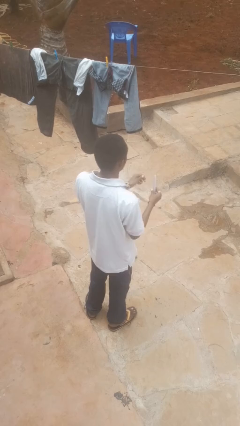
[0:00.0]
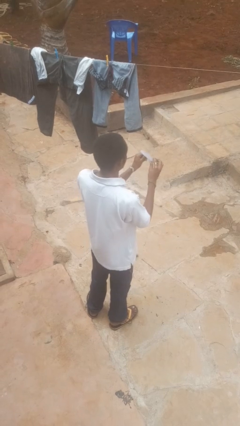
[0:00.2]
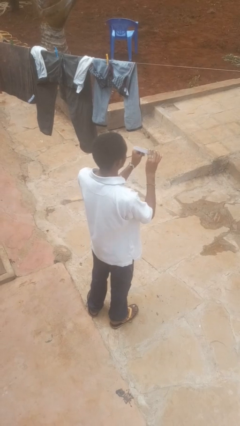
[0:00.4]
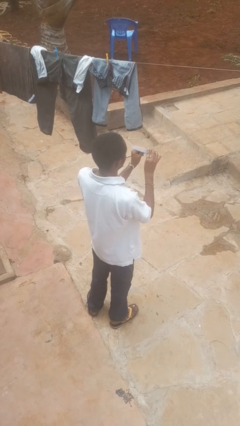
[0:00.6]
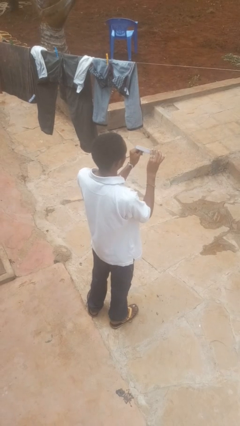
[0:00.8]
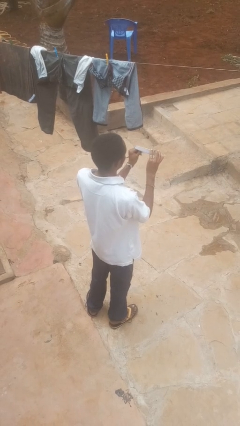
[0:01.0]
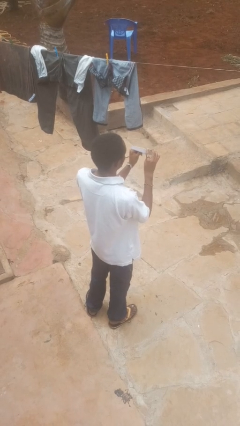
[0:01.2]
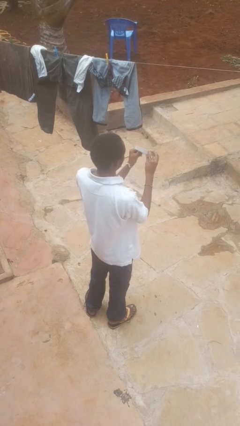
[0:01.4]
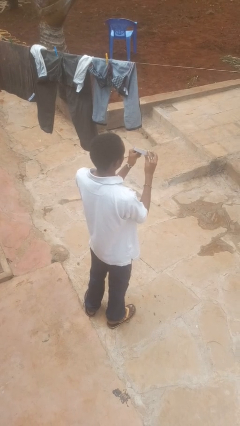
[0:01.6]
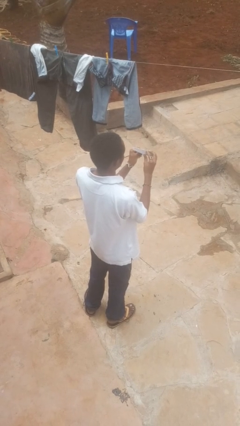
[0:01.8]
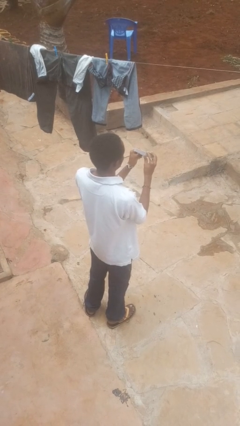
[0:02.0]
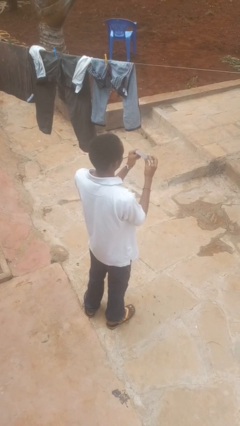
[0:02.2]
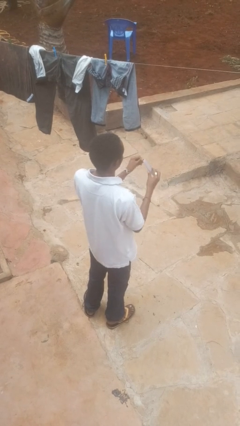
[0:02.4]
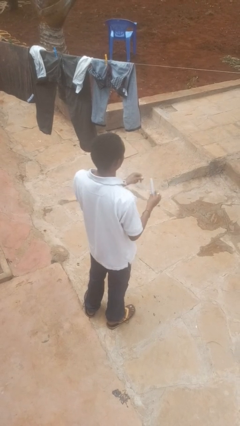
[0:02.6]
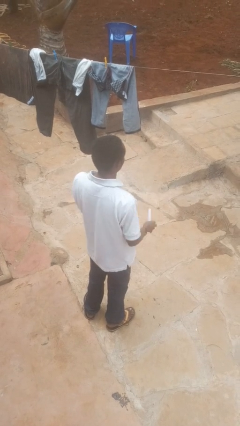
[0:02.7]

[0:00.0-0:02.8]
person files fingernails

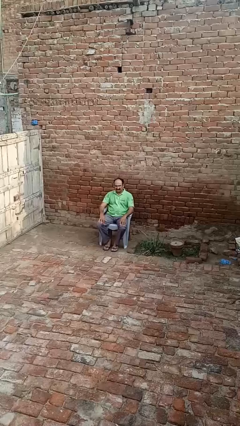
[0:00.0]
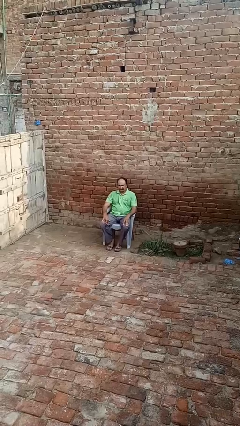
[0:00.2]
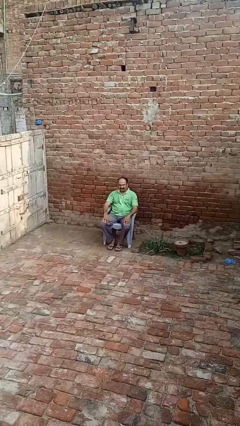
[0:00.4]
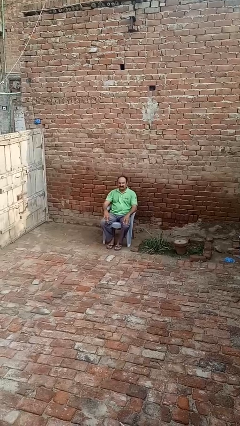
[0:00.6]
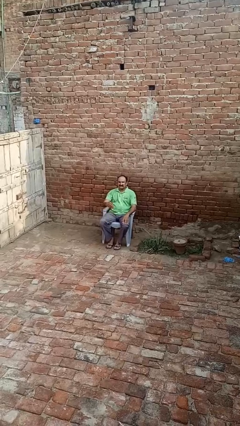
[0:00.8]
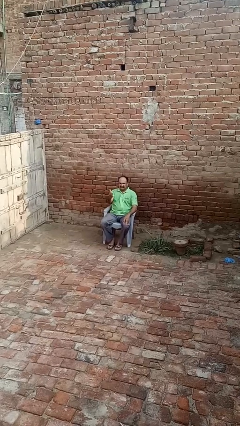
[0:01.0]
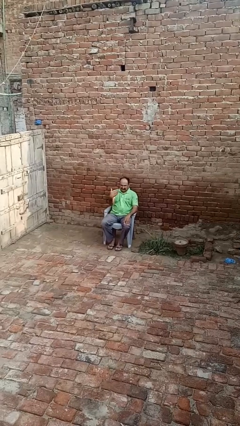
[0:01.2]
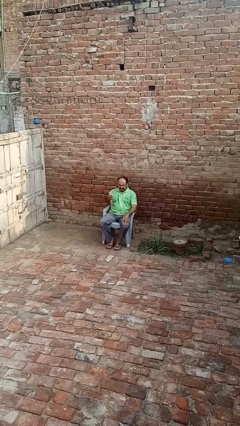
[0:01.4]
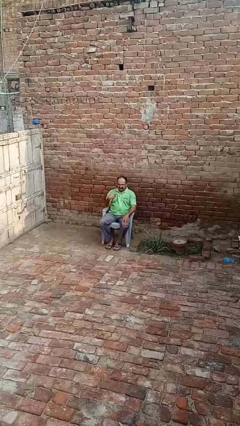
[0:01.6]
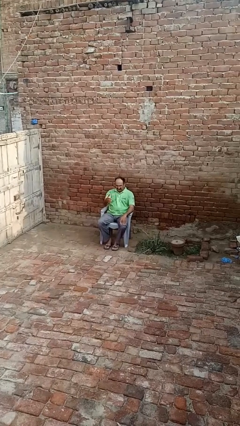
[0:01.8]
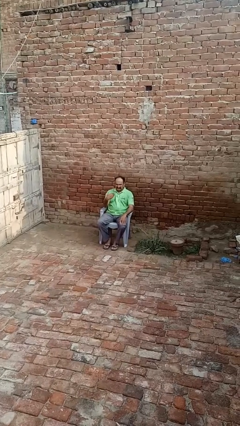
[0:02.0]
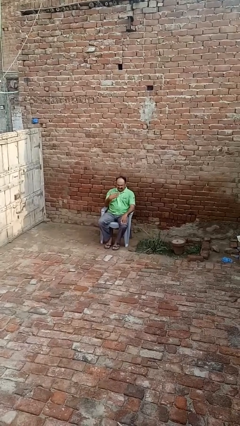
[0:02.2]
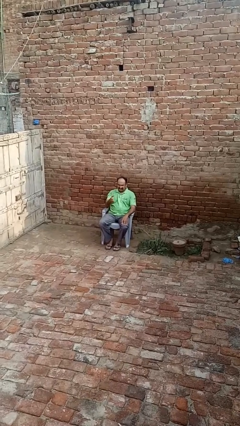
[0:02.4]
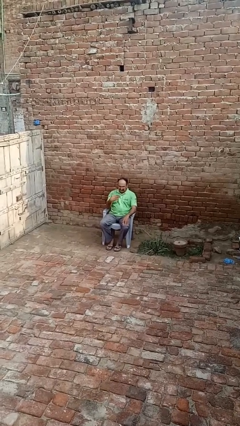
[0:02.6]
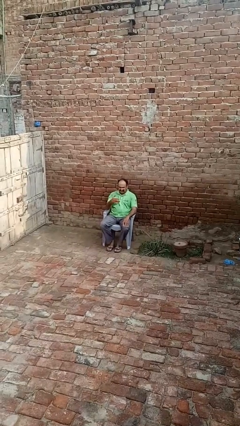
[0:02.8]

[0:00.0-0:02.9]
person gestures come here

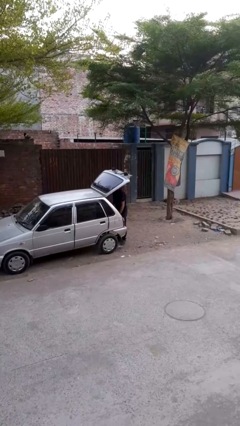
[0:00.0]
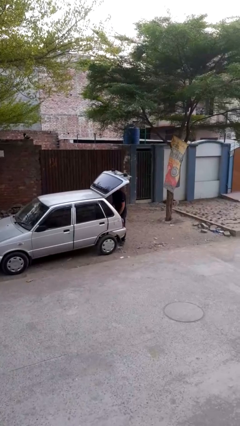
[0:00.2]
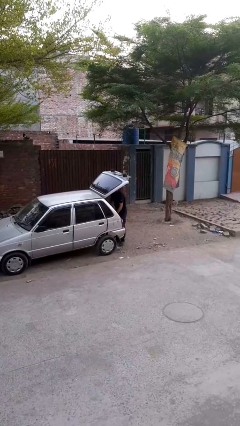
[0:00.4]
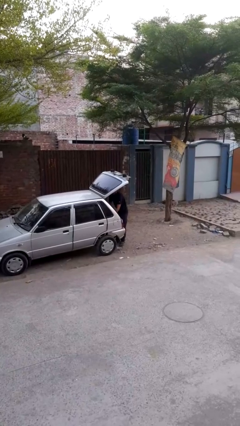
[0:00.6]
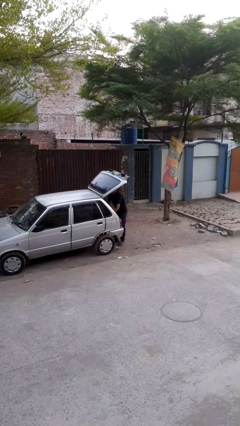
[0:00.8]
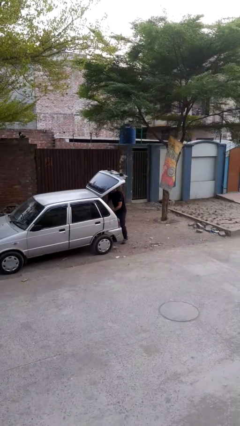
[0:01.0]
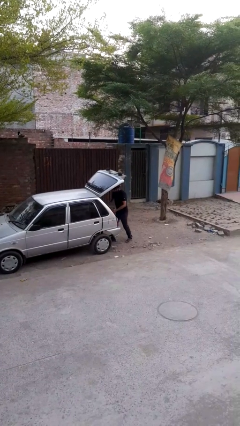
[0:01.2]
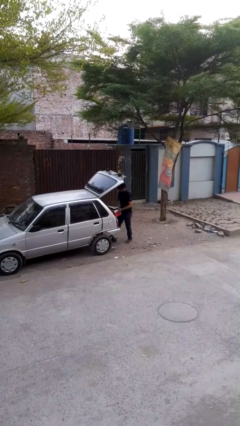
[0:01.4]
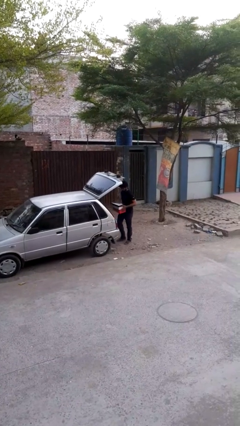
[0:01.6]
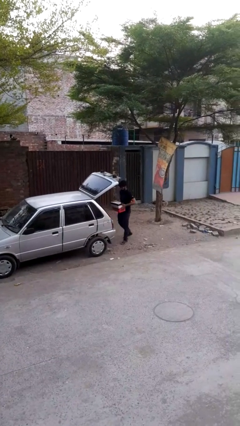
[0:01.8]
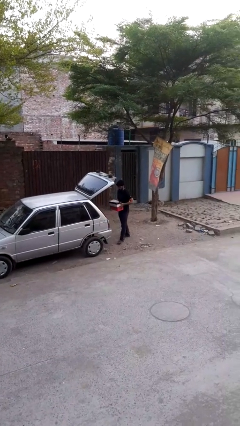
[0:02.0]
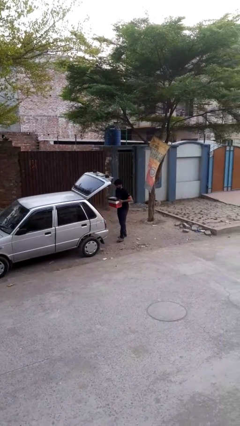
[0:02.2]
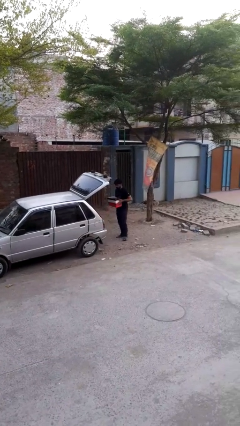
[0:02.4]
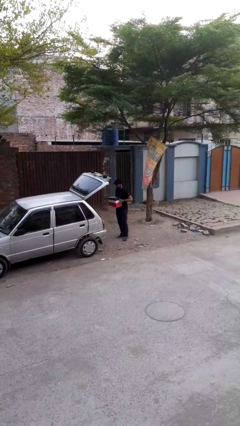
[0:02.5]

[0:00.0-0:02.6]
person unloads car

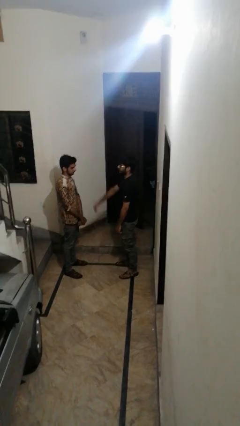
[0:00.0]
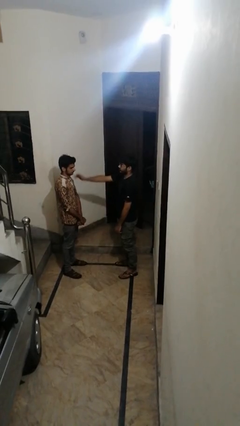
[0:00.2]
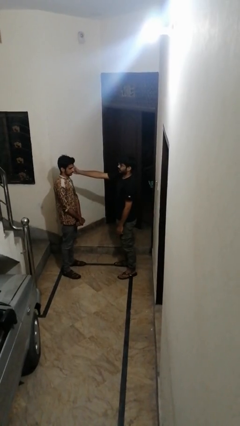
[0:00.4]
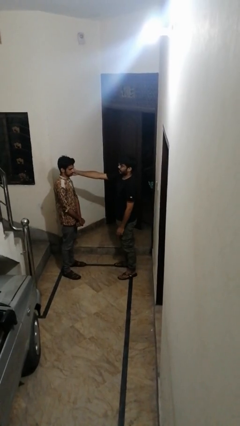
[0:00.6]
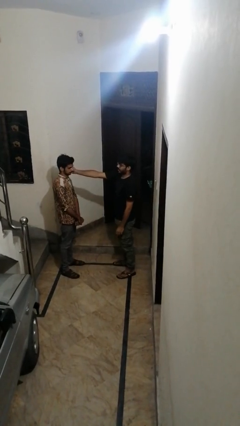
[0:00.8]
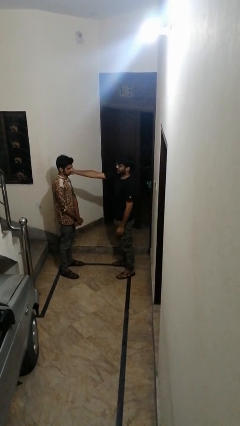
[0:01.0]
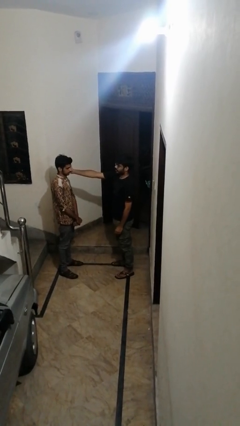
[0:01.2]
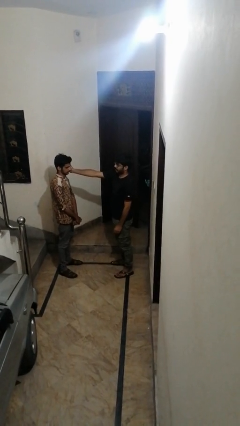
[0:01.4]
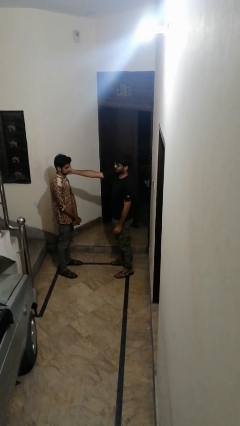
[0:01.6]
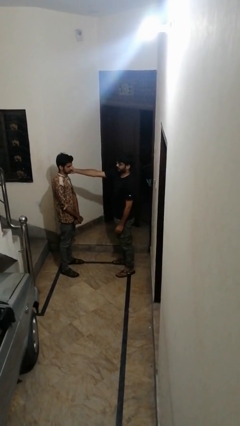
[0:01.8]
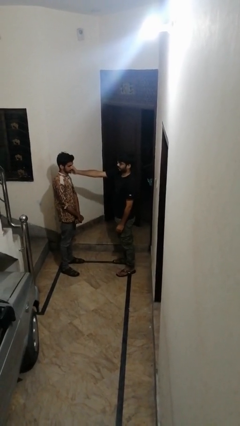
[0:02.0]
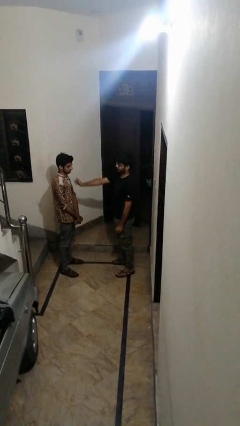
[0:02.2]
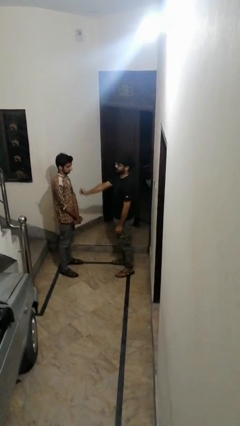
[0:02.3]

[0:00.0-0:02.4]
person touches face of person

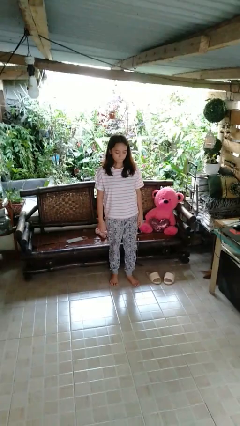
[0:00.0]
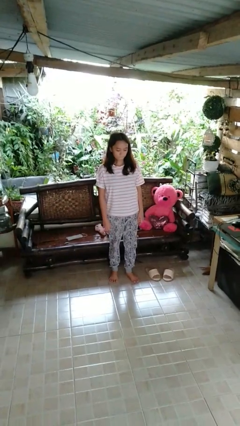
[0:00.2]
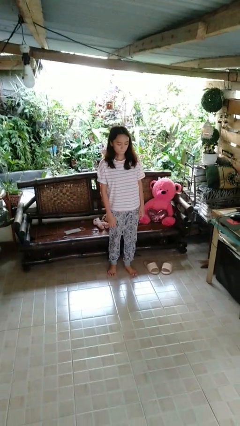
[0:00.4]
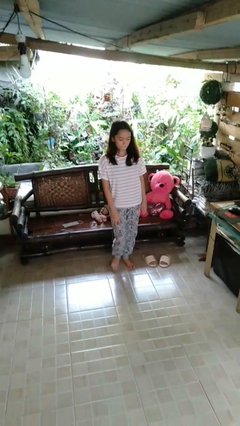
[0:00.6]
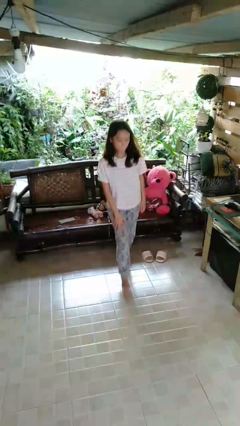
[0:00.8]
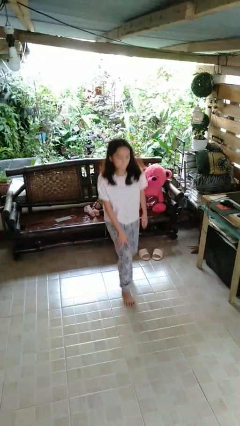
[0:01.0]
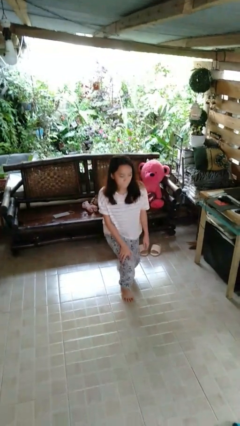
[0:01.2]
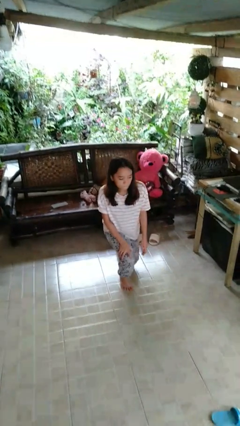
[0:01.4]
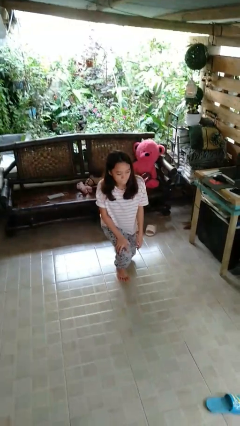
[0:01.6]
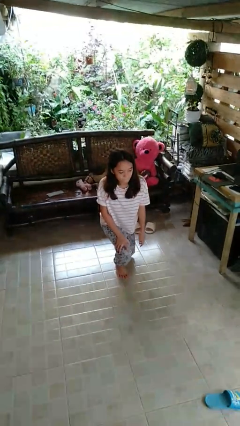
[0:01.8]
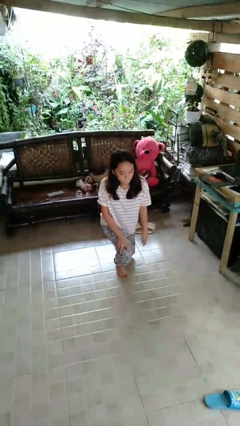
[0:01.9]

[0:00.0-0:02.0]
person kneels

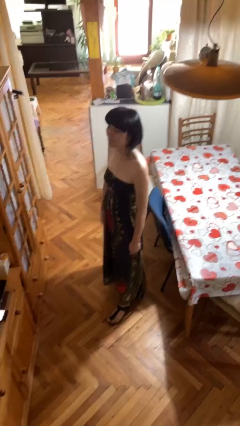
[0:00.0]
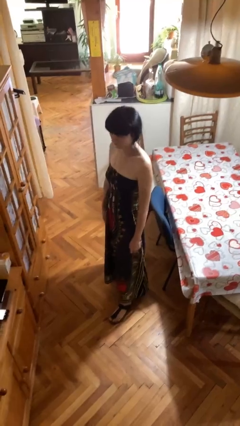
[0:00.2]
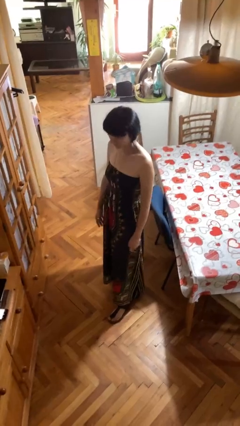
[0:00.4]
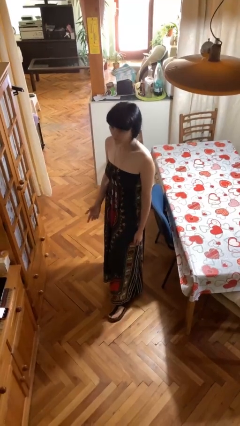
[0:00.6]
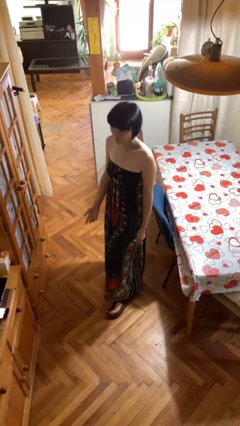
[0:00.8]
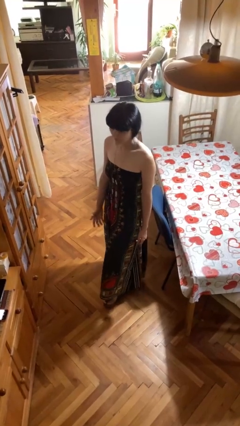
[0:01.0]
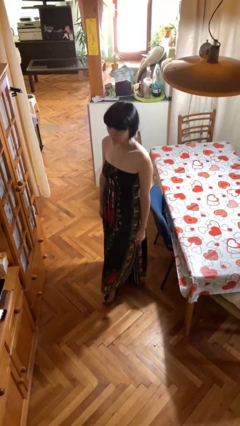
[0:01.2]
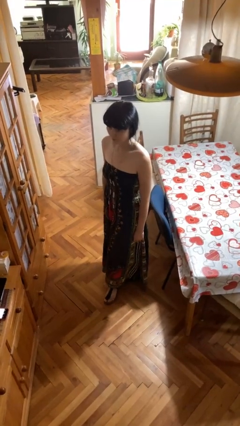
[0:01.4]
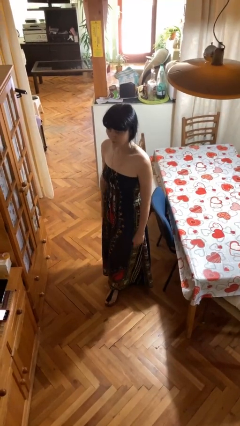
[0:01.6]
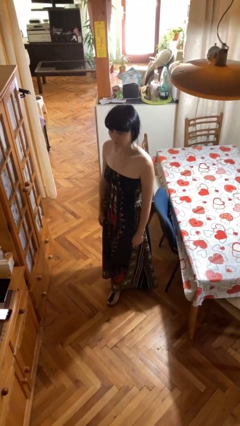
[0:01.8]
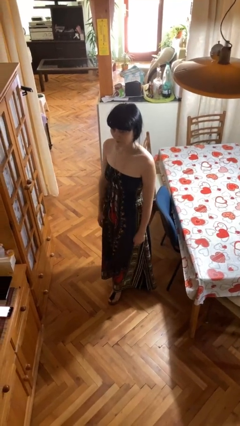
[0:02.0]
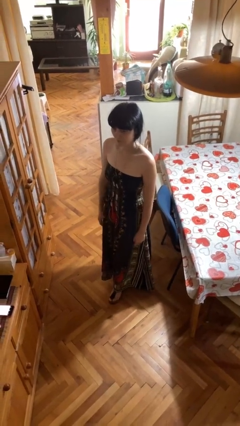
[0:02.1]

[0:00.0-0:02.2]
person nods head

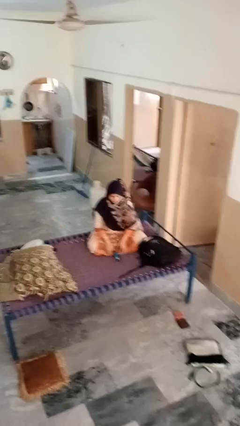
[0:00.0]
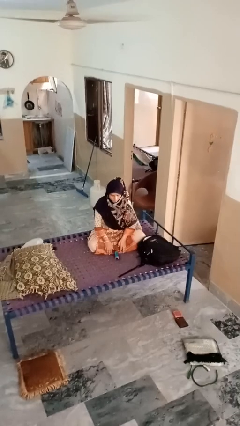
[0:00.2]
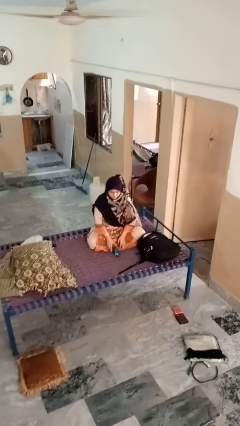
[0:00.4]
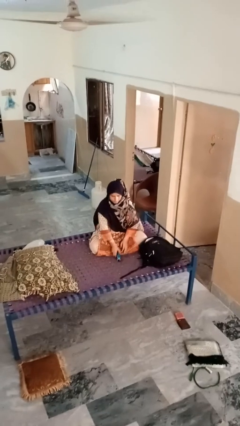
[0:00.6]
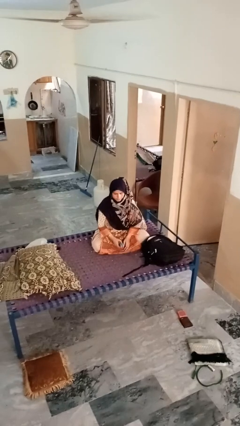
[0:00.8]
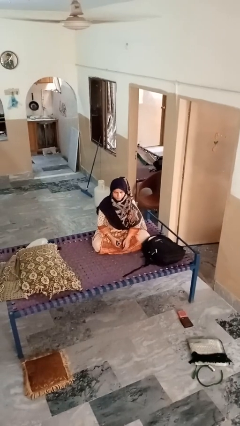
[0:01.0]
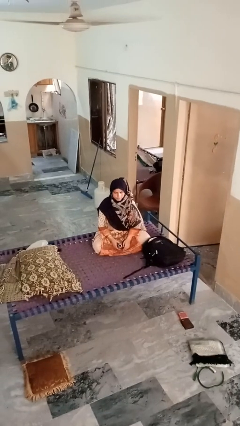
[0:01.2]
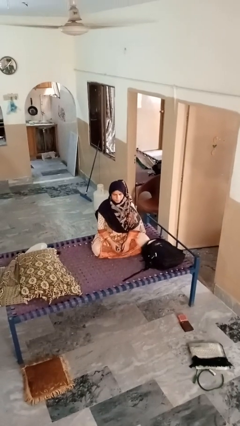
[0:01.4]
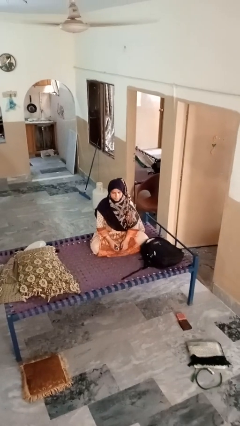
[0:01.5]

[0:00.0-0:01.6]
person picks up object from floor

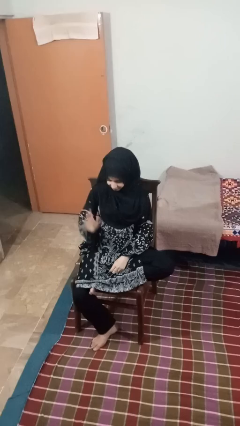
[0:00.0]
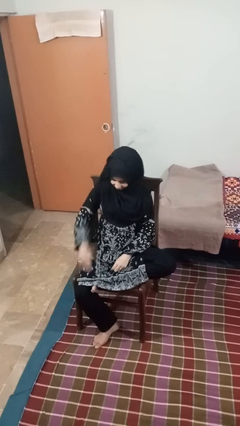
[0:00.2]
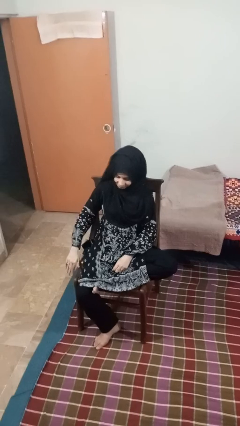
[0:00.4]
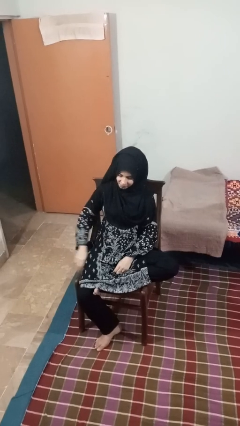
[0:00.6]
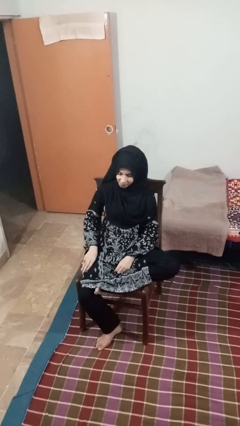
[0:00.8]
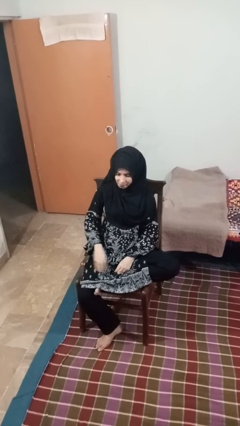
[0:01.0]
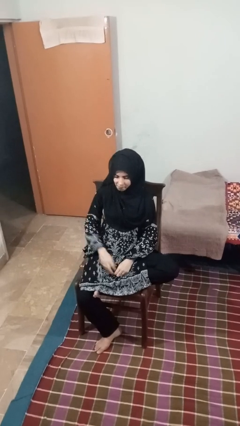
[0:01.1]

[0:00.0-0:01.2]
person swats bug
